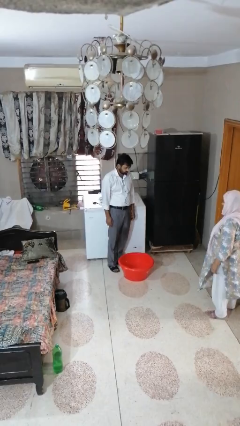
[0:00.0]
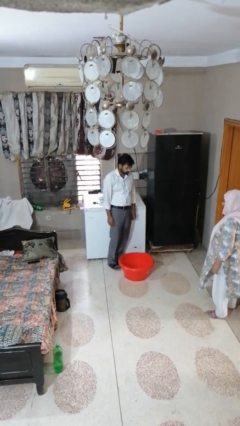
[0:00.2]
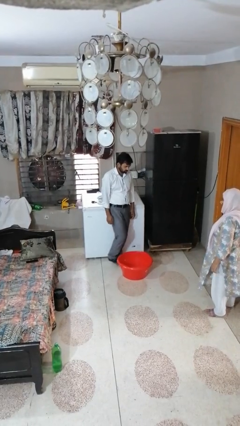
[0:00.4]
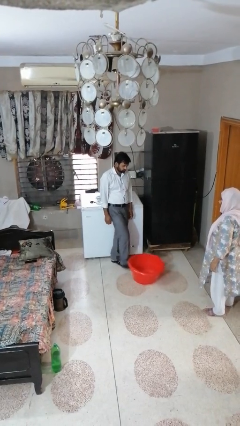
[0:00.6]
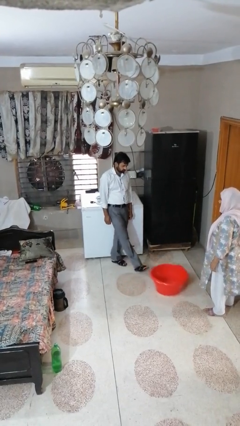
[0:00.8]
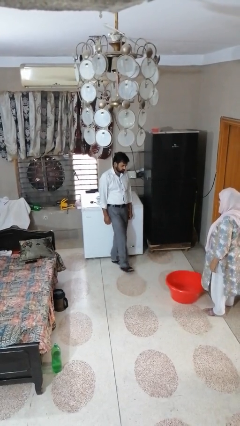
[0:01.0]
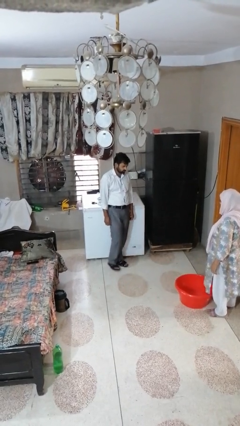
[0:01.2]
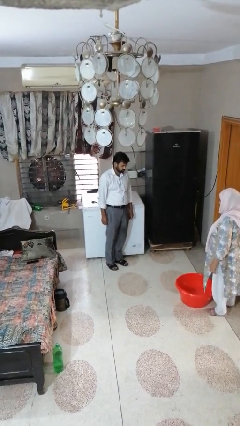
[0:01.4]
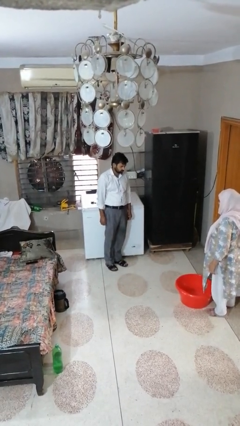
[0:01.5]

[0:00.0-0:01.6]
person kicks object to person

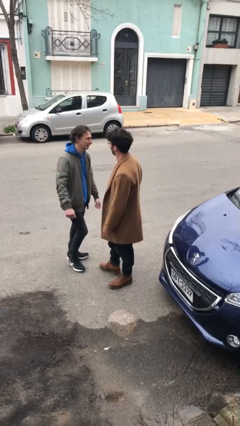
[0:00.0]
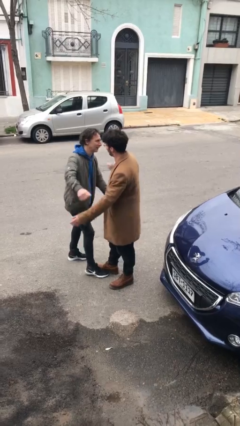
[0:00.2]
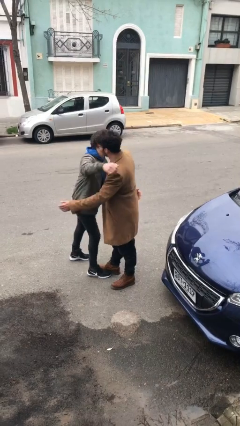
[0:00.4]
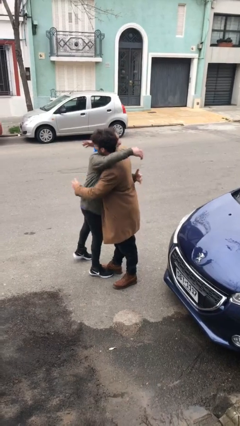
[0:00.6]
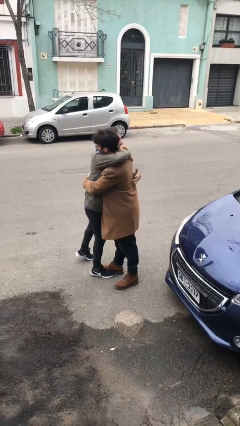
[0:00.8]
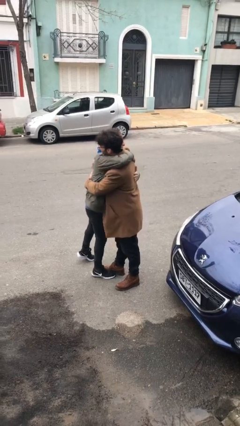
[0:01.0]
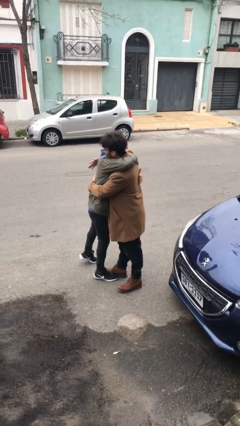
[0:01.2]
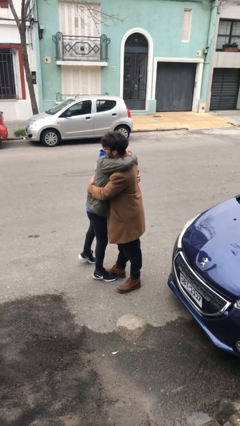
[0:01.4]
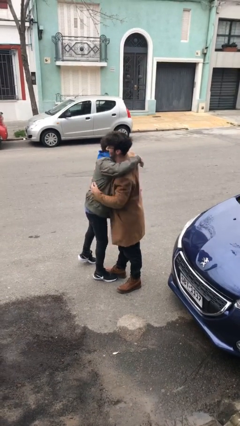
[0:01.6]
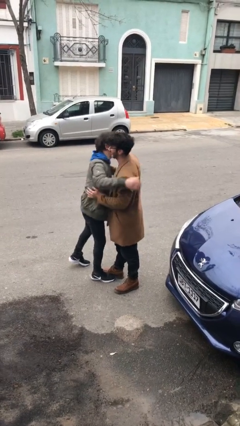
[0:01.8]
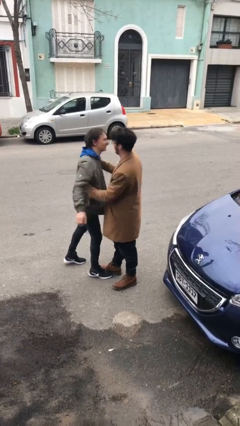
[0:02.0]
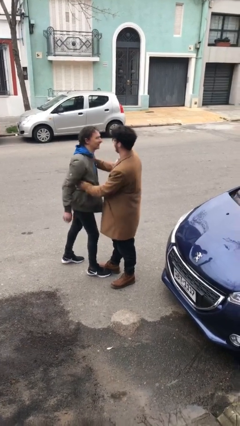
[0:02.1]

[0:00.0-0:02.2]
person embraces person

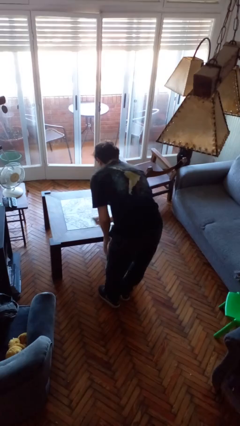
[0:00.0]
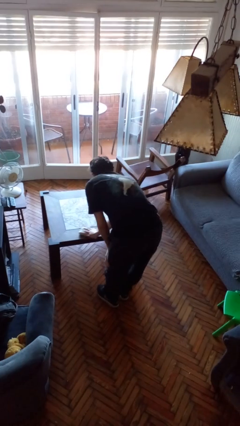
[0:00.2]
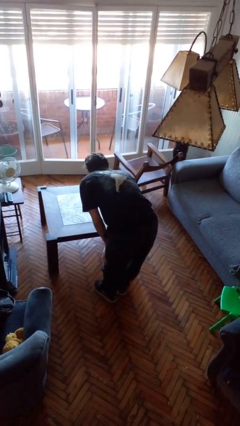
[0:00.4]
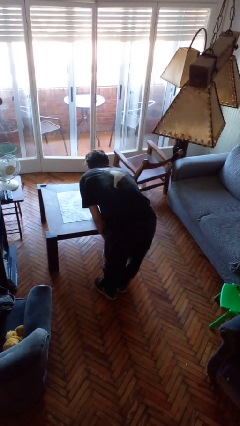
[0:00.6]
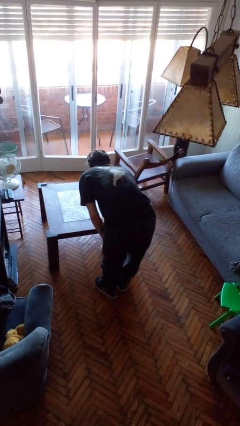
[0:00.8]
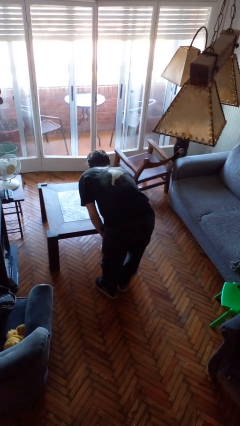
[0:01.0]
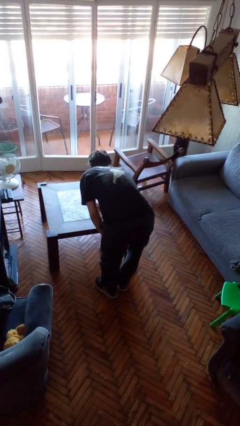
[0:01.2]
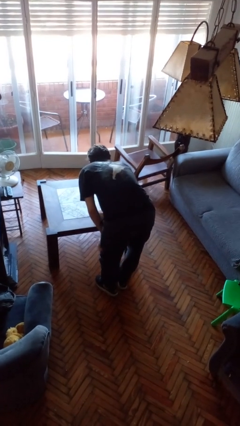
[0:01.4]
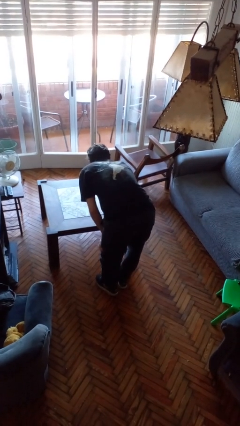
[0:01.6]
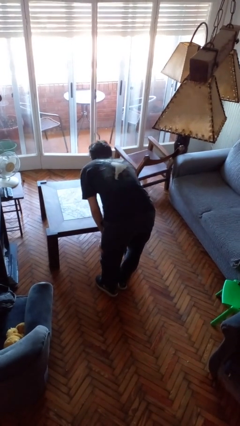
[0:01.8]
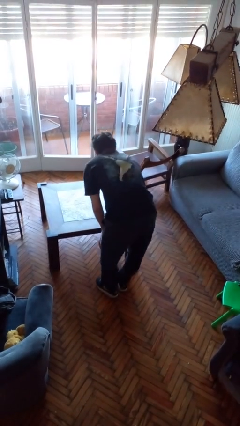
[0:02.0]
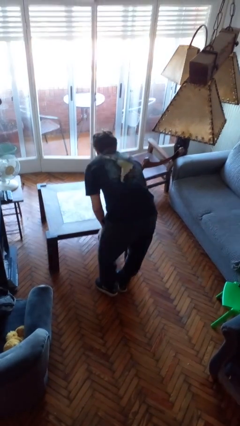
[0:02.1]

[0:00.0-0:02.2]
person cleans table with rag

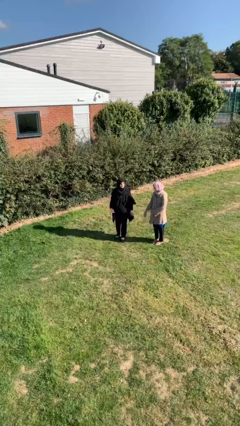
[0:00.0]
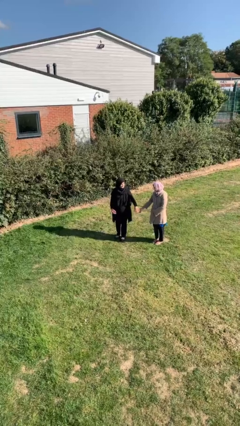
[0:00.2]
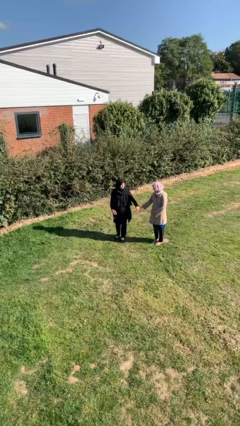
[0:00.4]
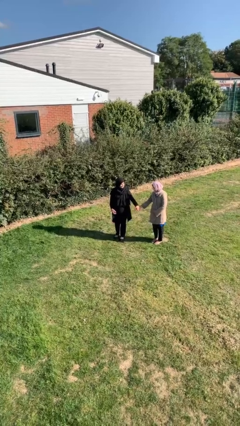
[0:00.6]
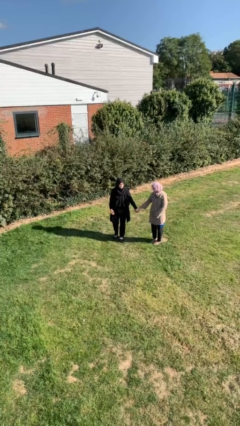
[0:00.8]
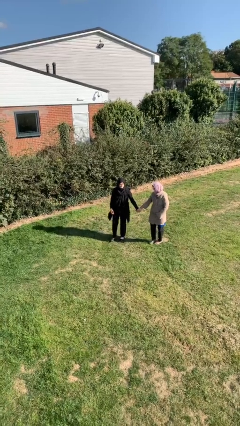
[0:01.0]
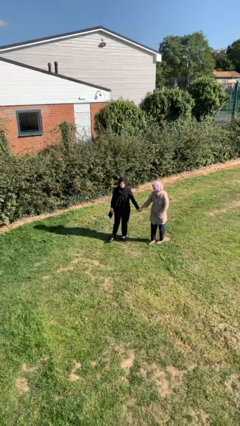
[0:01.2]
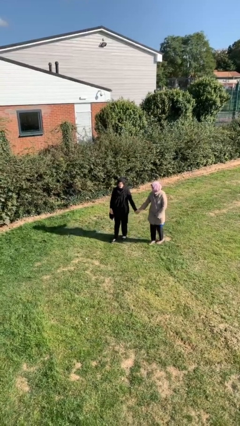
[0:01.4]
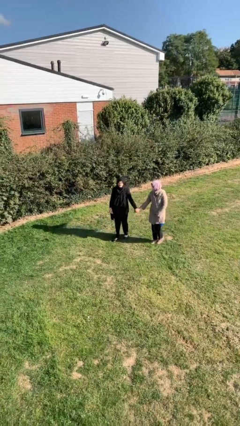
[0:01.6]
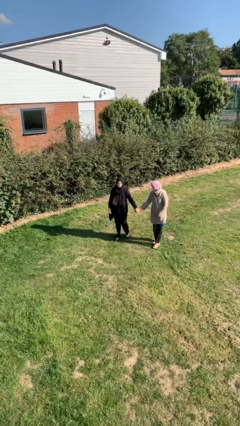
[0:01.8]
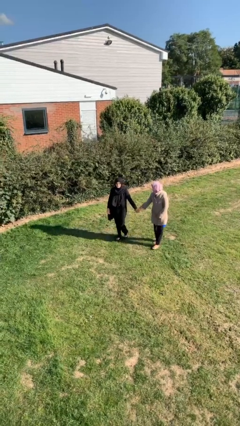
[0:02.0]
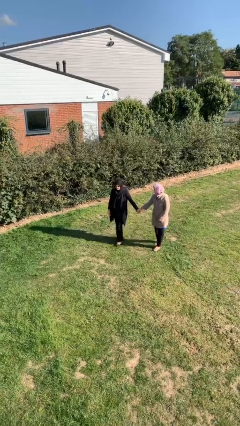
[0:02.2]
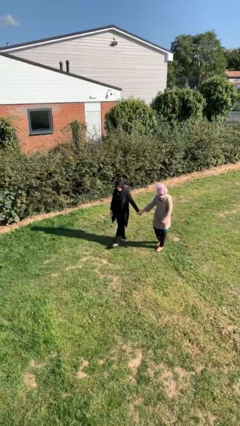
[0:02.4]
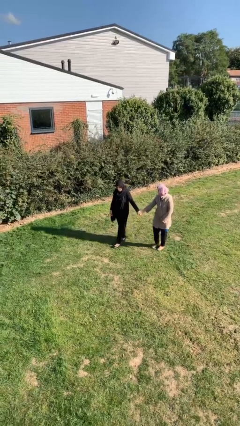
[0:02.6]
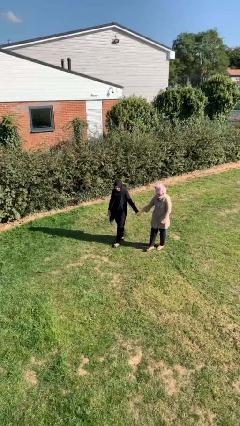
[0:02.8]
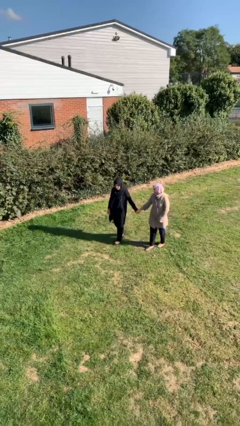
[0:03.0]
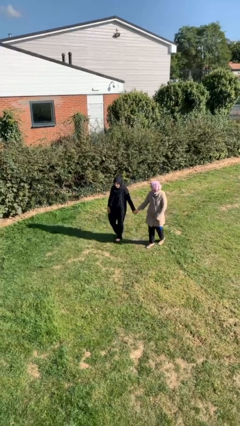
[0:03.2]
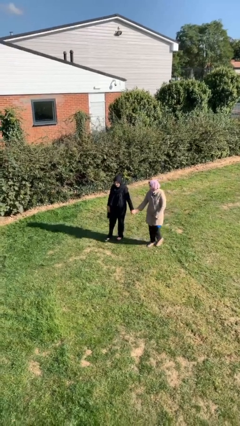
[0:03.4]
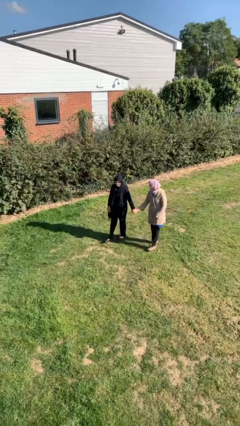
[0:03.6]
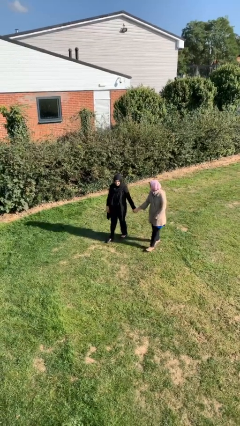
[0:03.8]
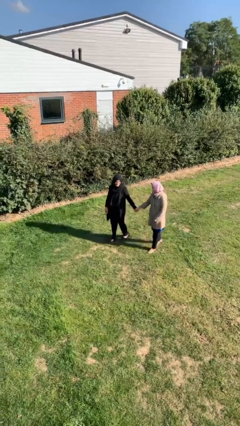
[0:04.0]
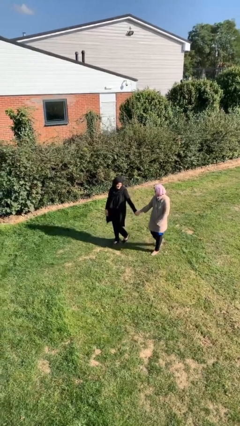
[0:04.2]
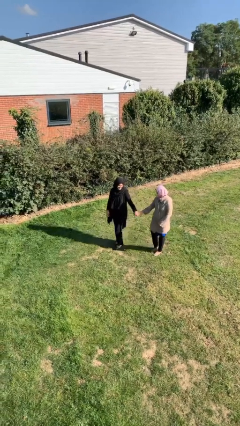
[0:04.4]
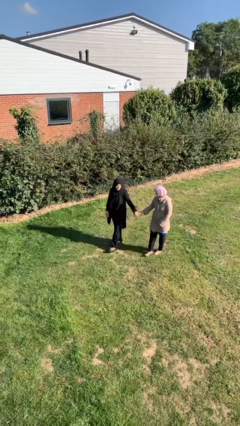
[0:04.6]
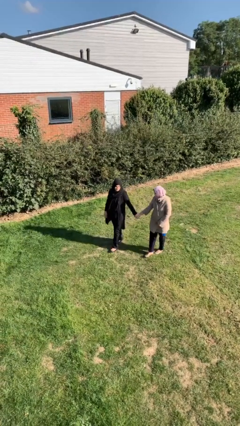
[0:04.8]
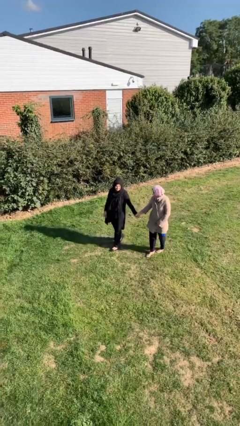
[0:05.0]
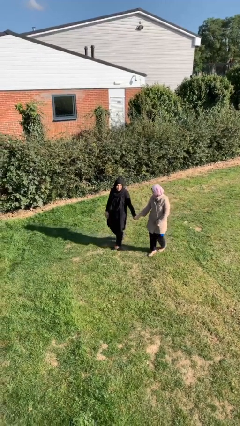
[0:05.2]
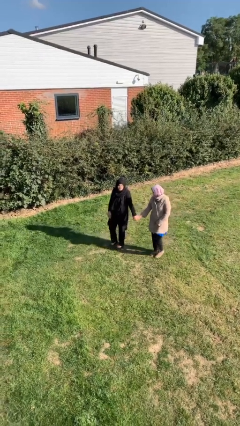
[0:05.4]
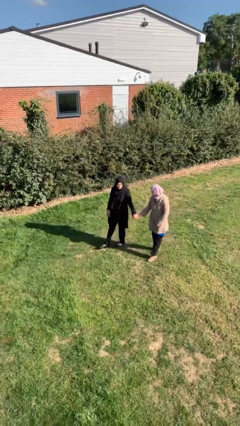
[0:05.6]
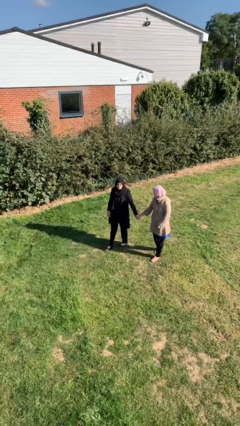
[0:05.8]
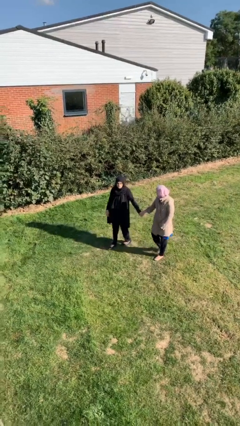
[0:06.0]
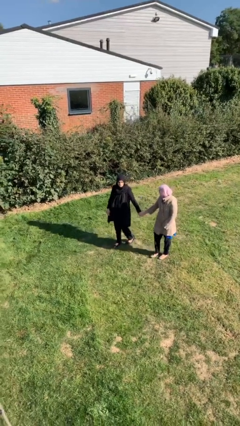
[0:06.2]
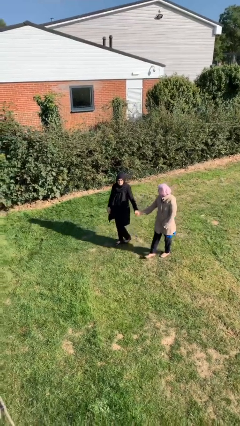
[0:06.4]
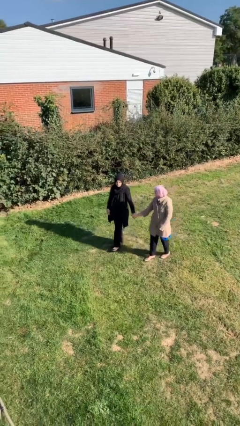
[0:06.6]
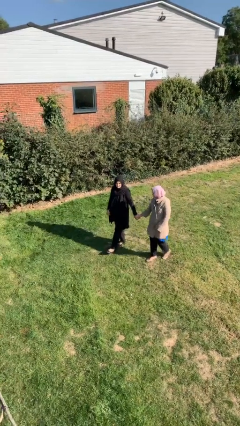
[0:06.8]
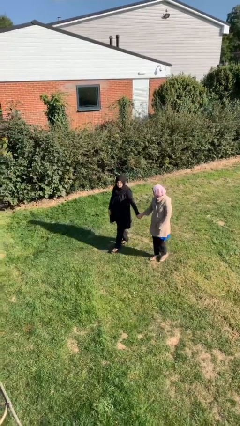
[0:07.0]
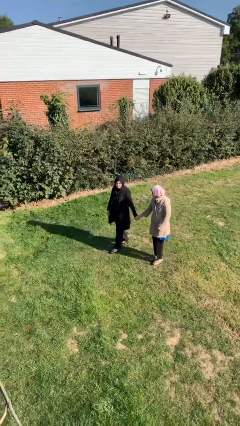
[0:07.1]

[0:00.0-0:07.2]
person holds hand

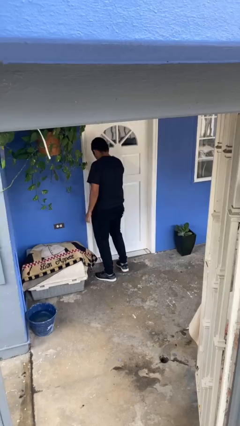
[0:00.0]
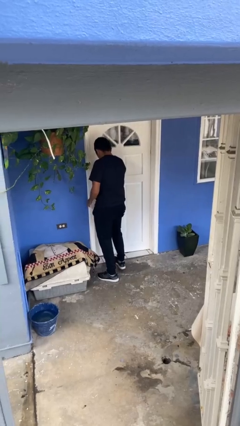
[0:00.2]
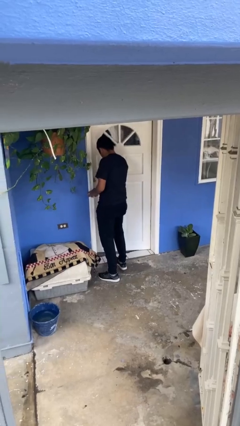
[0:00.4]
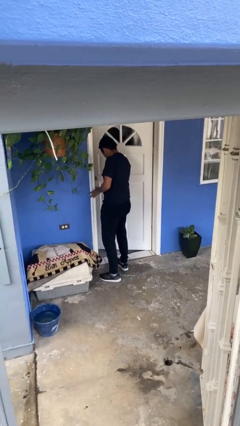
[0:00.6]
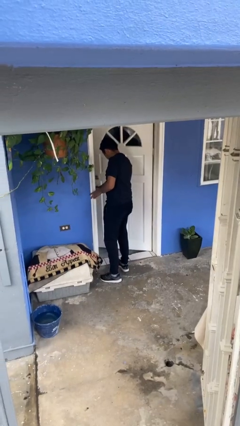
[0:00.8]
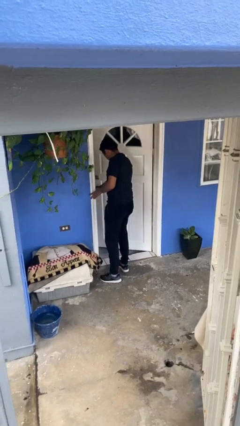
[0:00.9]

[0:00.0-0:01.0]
person opens facility door

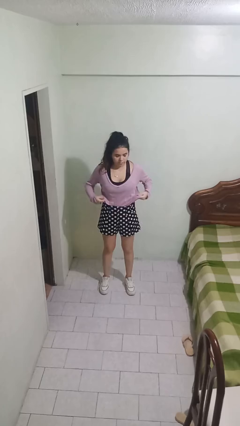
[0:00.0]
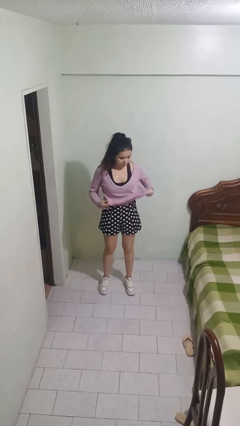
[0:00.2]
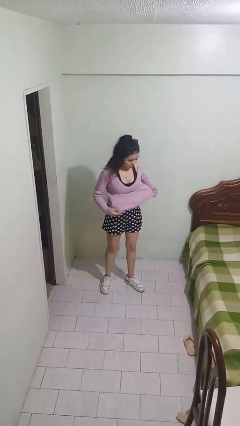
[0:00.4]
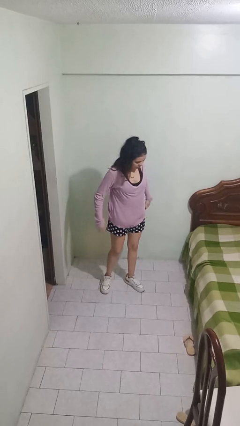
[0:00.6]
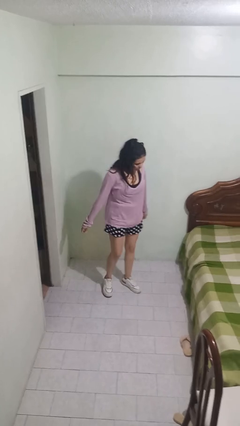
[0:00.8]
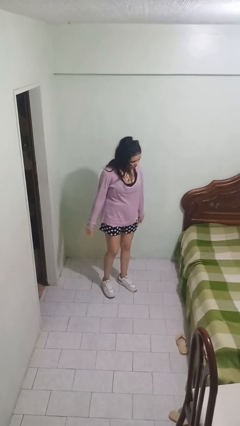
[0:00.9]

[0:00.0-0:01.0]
person untucks shirt

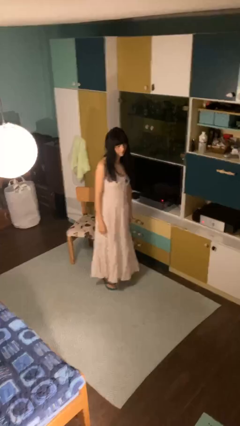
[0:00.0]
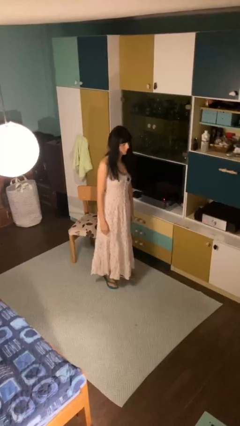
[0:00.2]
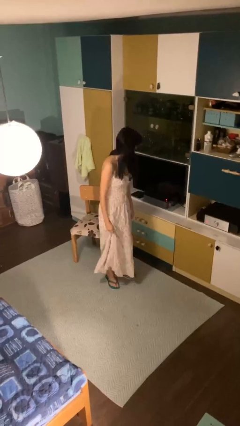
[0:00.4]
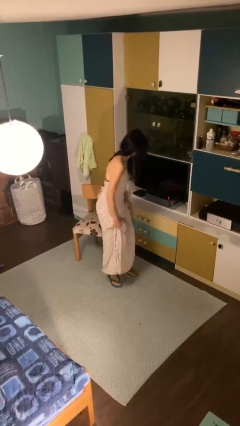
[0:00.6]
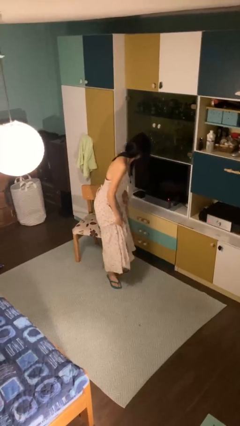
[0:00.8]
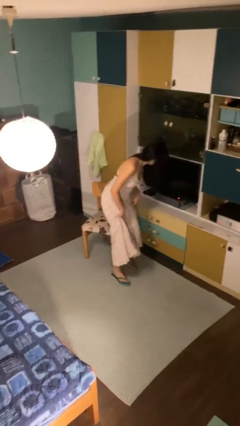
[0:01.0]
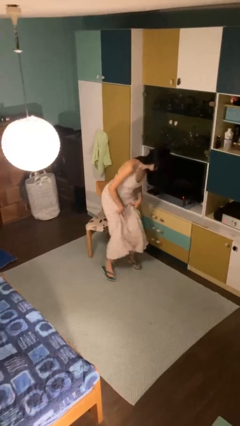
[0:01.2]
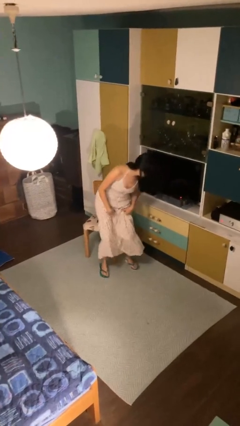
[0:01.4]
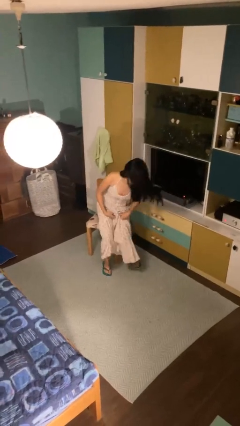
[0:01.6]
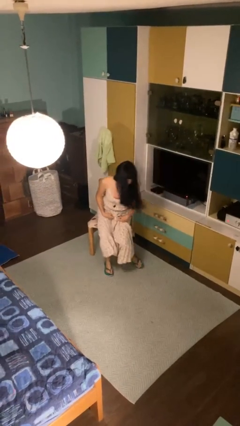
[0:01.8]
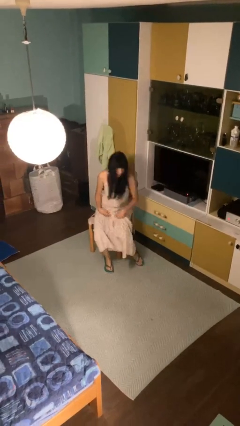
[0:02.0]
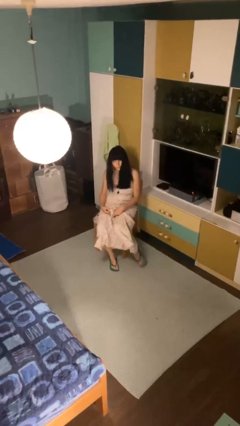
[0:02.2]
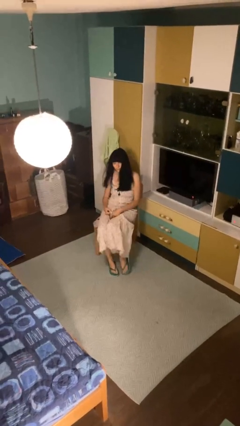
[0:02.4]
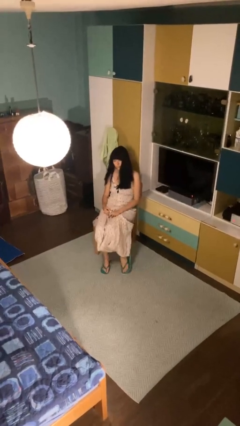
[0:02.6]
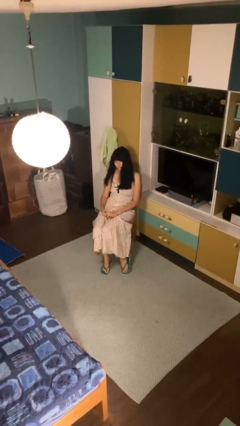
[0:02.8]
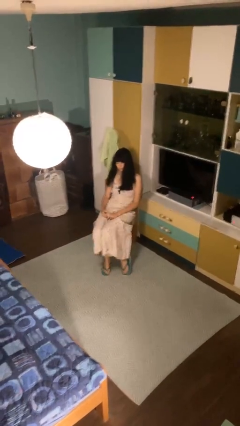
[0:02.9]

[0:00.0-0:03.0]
person sits down
